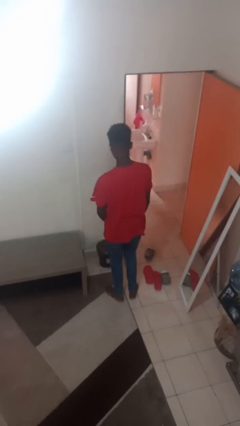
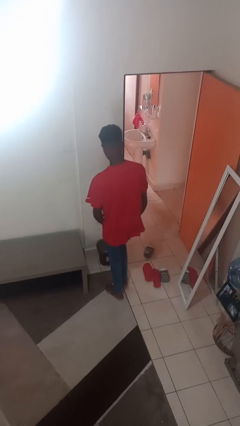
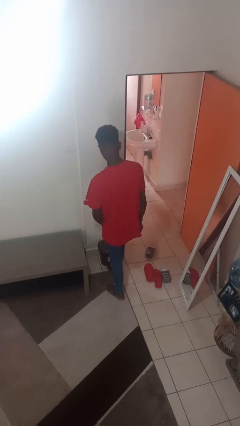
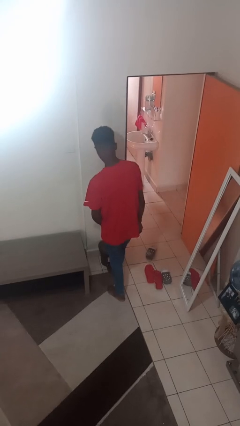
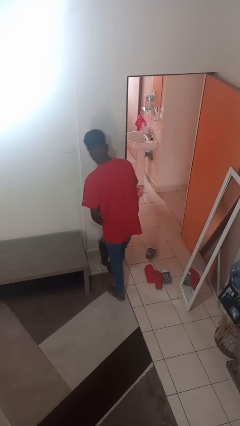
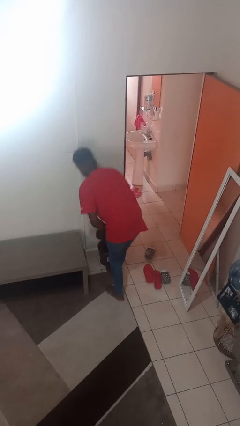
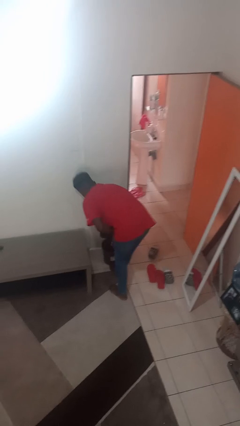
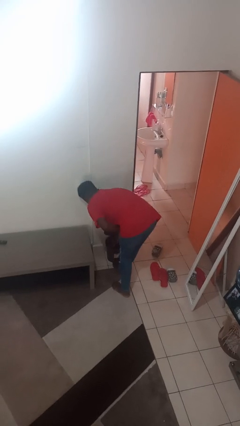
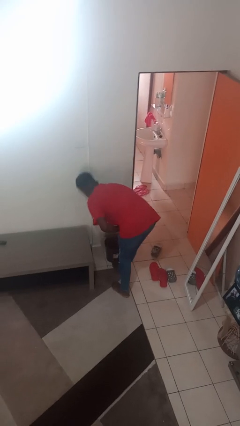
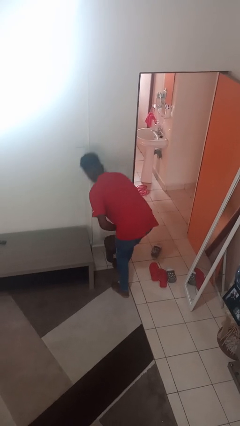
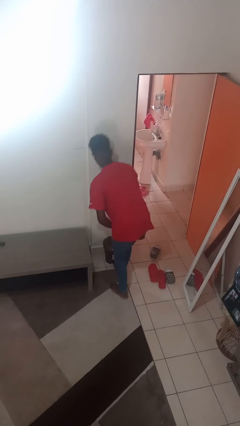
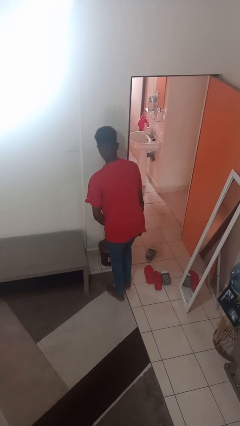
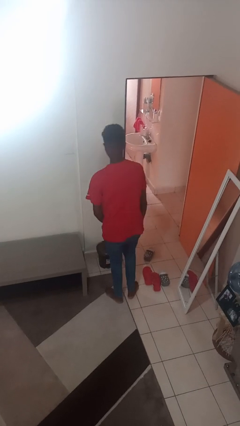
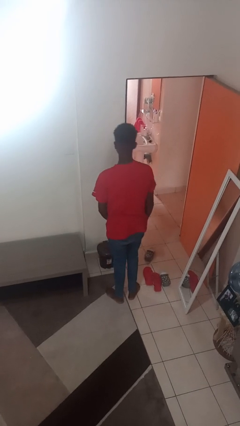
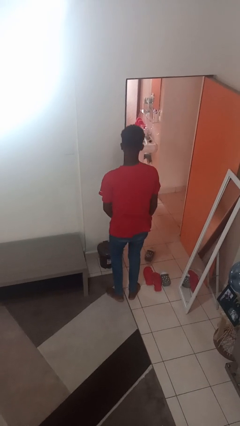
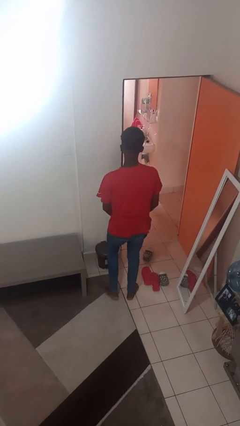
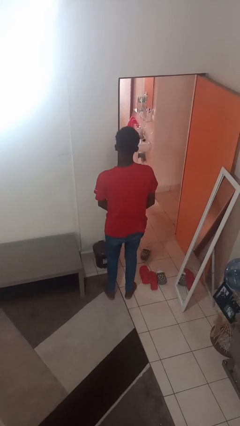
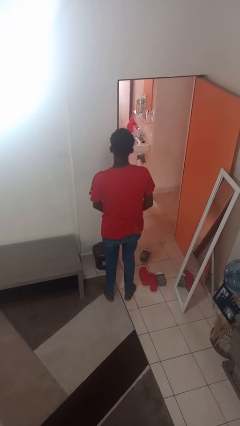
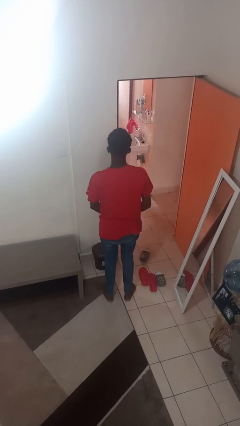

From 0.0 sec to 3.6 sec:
person discards trash

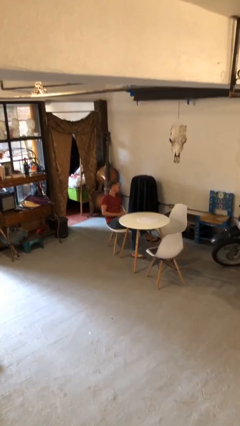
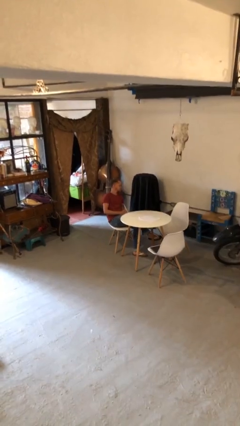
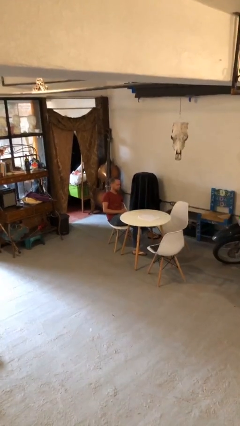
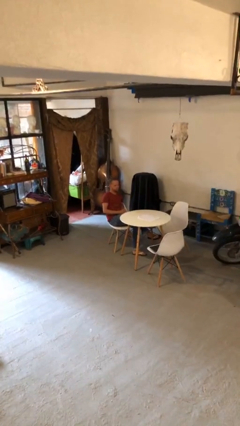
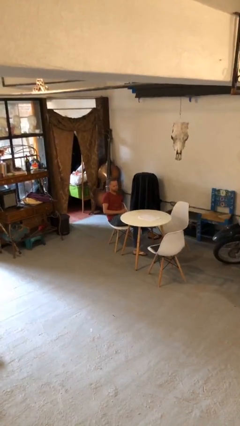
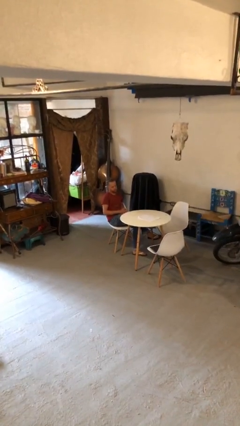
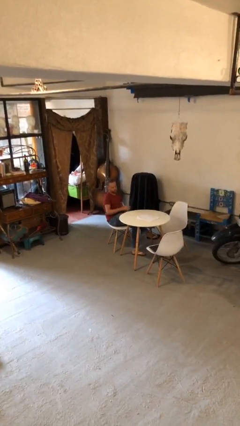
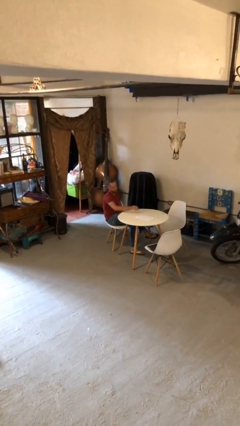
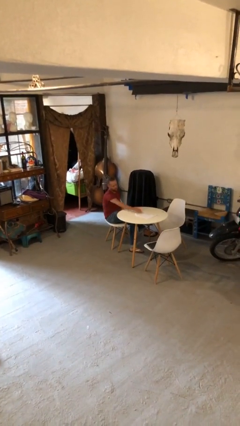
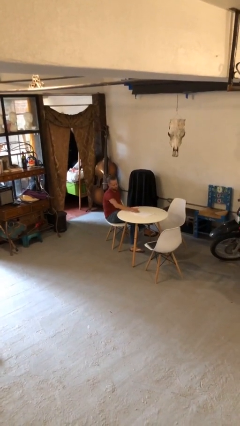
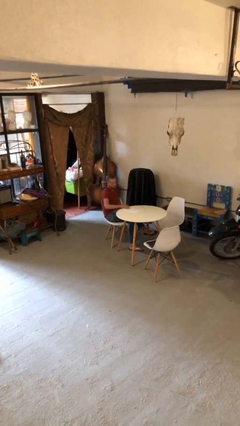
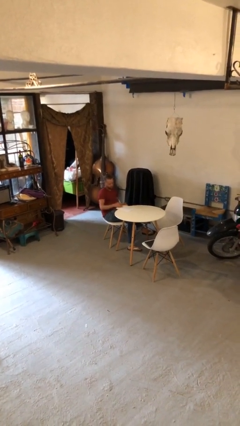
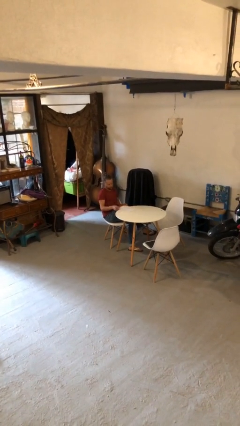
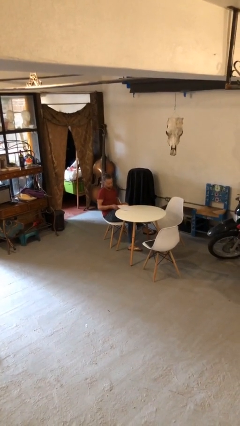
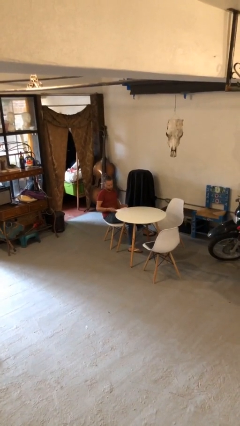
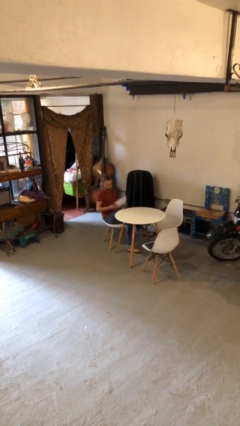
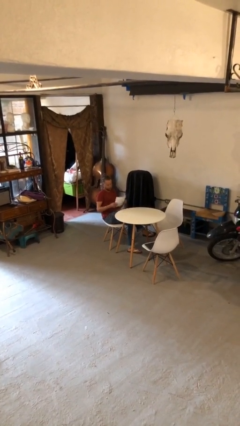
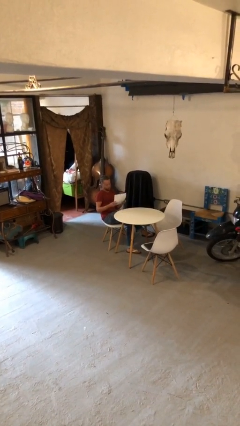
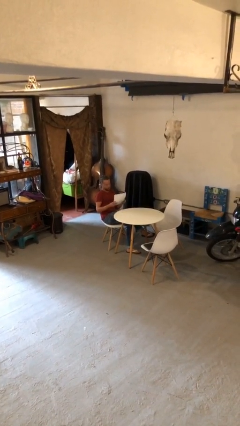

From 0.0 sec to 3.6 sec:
person picks up object from table

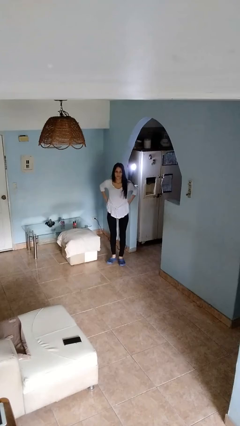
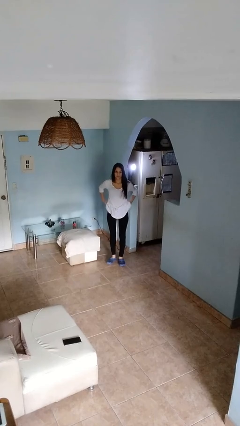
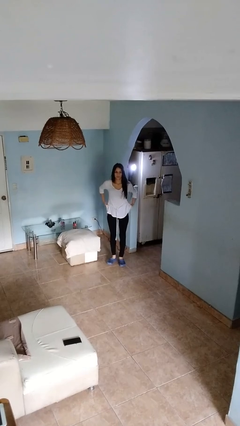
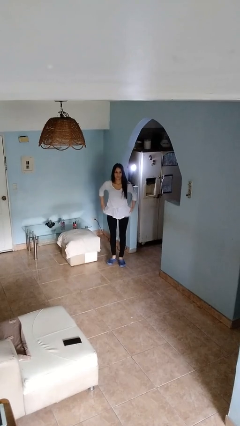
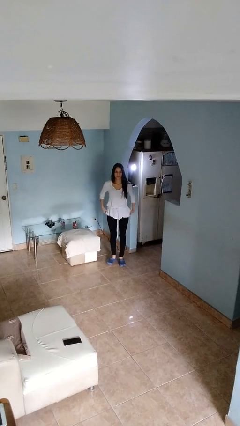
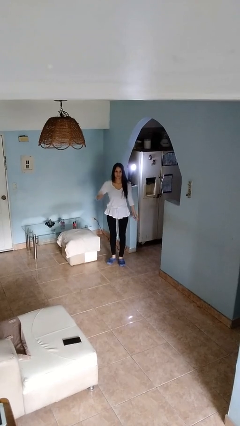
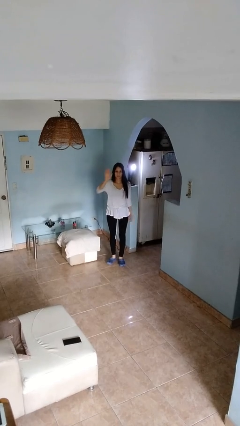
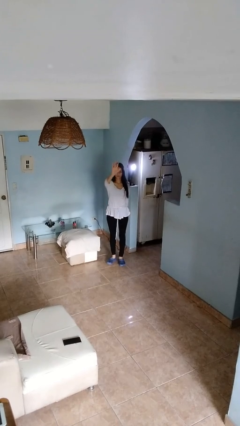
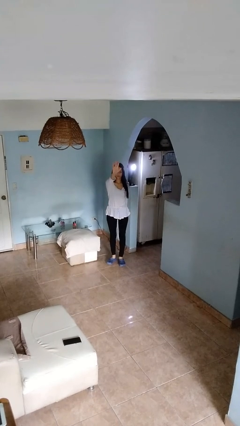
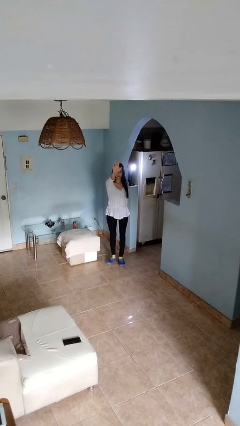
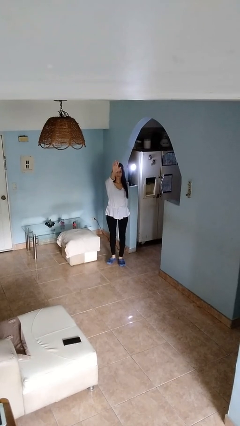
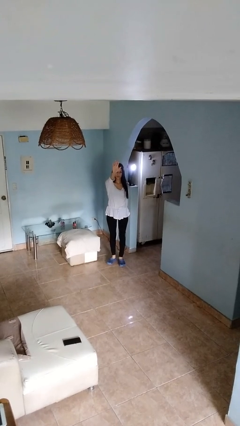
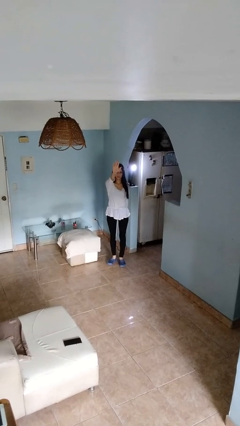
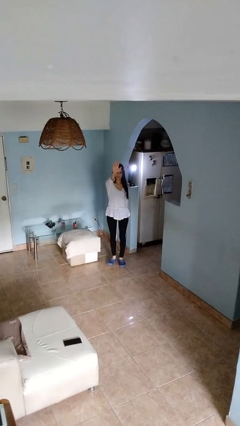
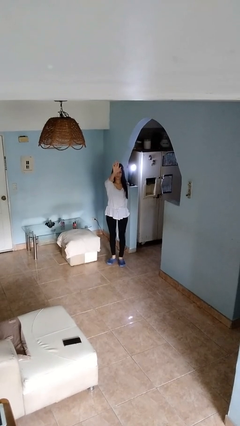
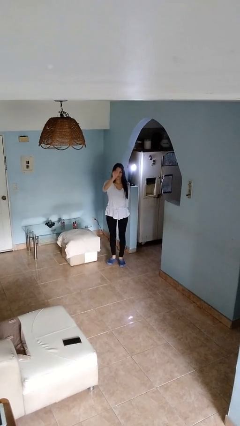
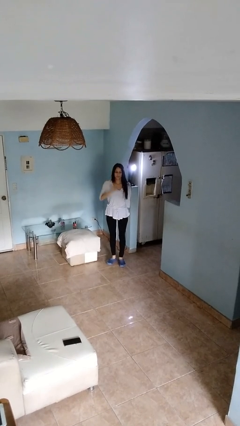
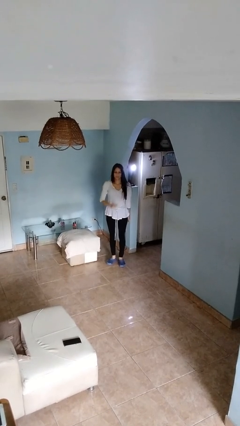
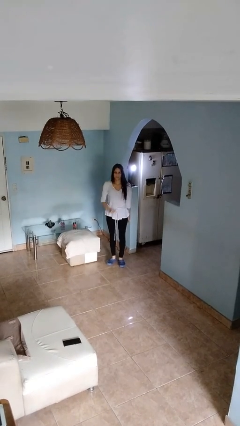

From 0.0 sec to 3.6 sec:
person gestures number five

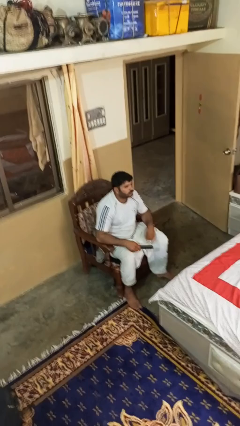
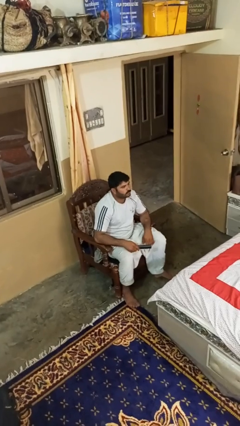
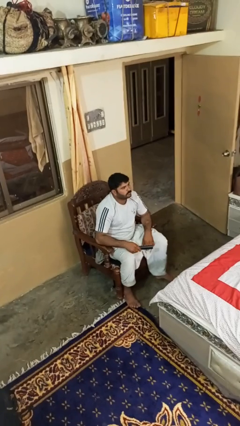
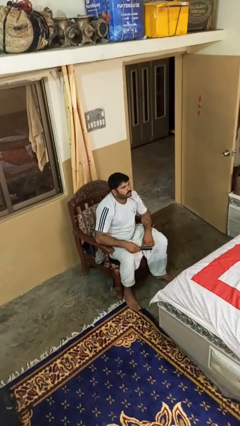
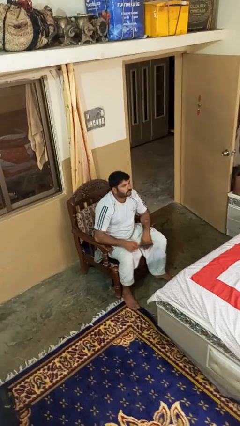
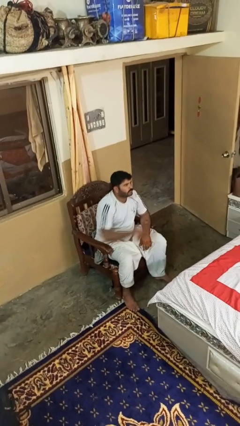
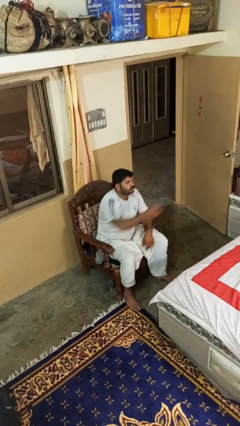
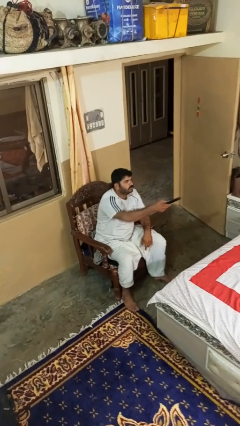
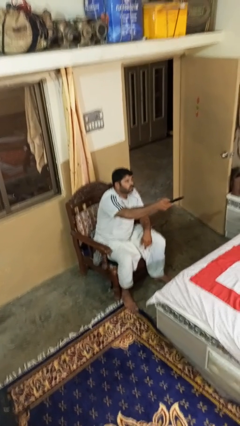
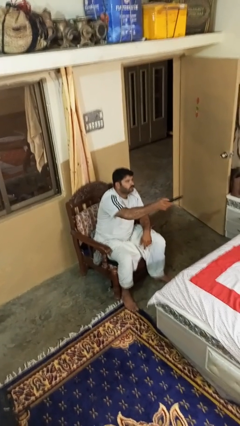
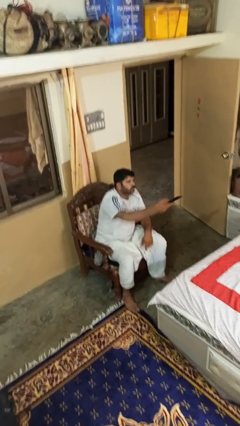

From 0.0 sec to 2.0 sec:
person uses television remote

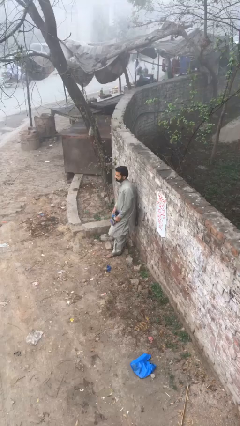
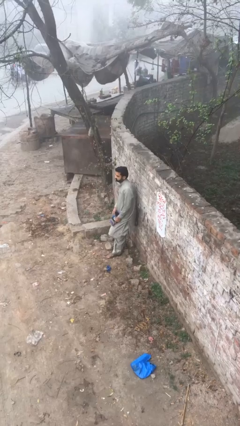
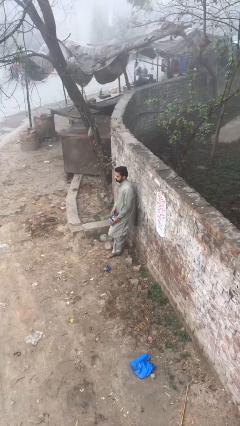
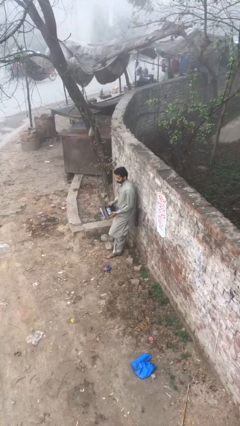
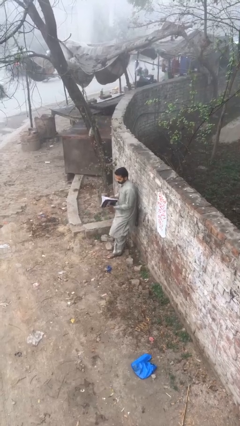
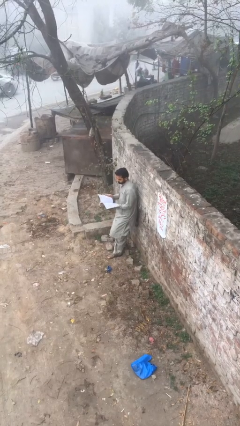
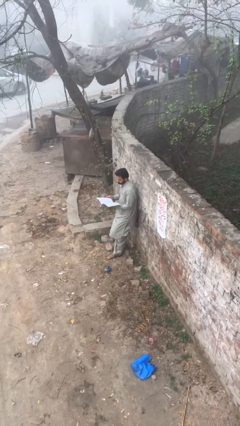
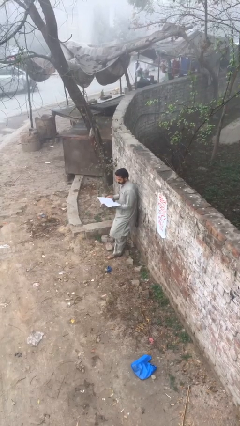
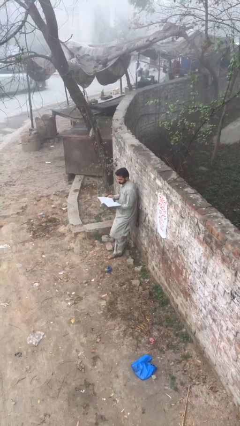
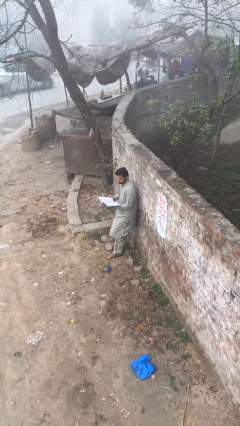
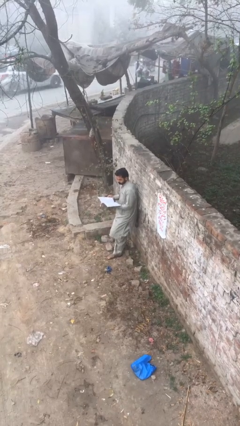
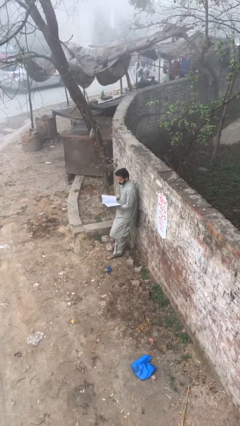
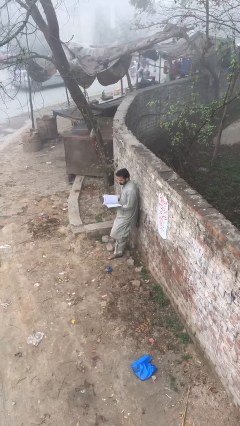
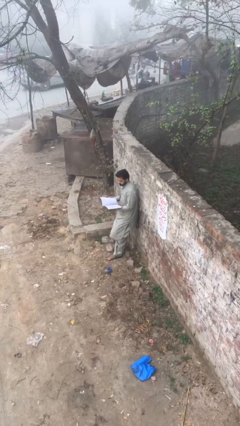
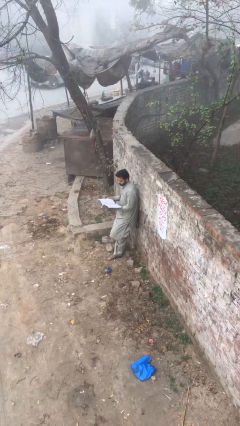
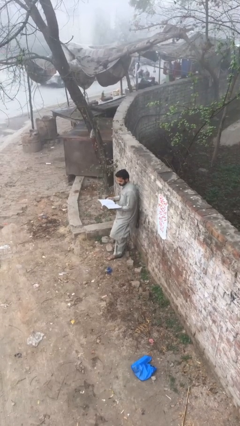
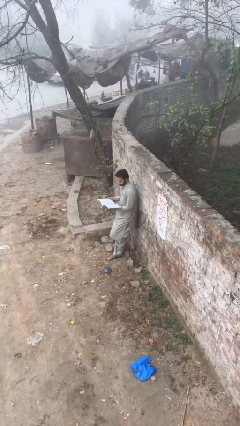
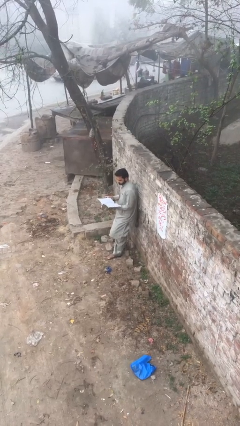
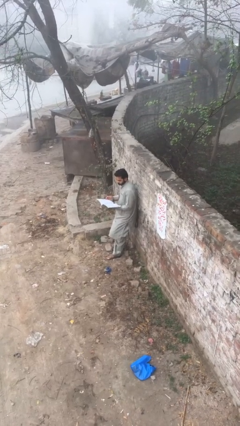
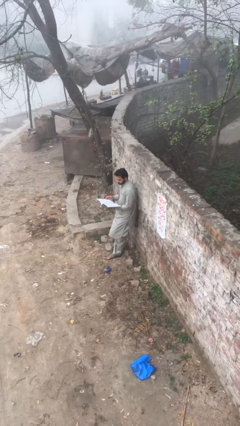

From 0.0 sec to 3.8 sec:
person reads document

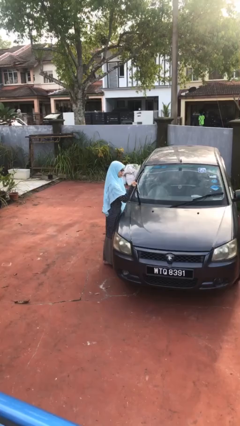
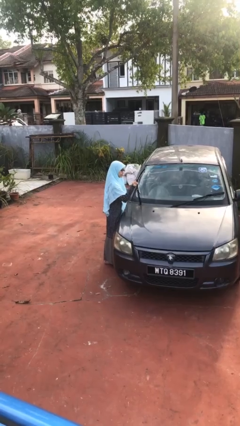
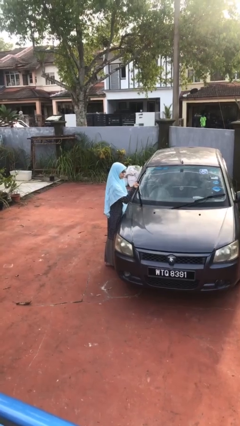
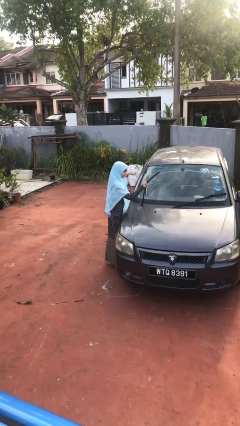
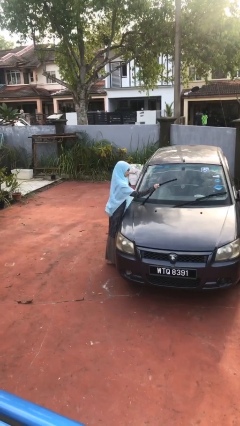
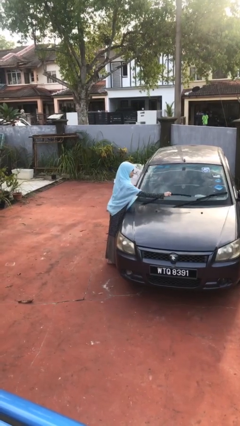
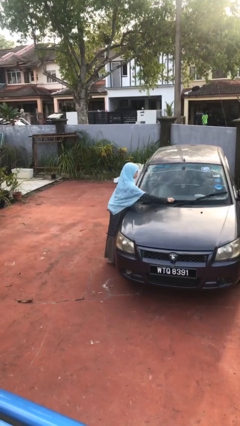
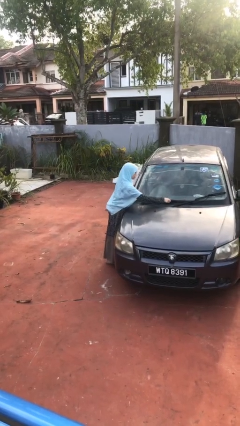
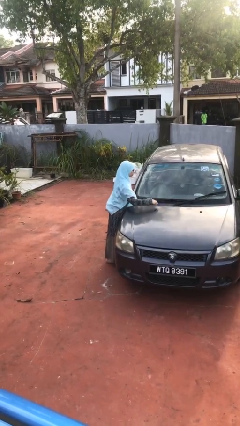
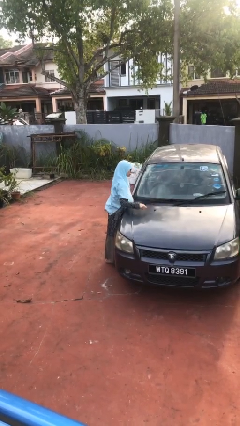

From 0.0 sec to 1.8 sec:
person flips down car wipers
